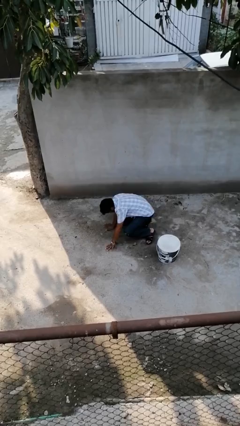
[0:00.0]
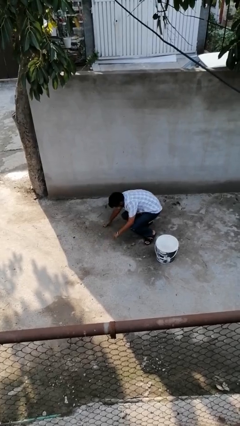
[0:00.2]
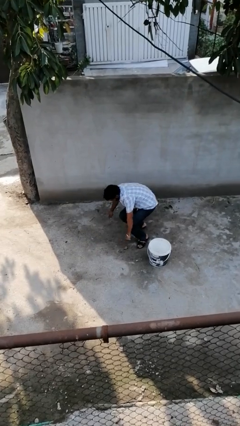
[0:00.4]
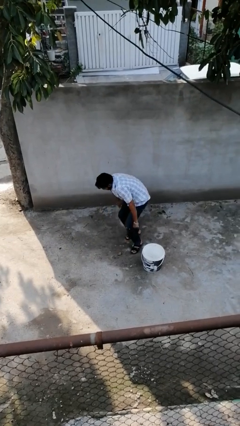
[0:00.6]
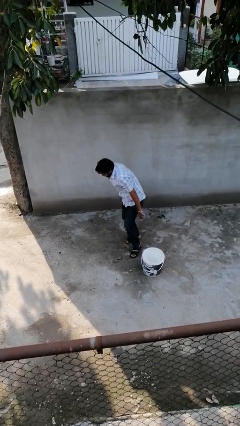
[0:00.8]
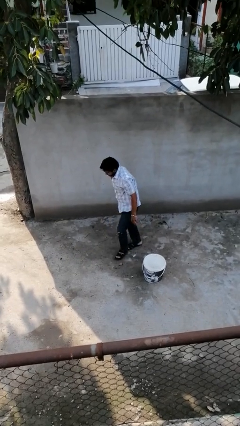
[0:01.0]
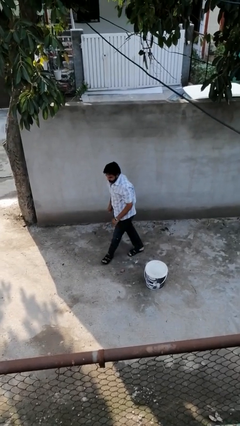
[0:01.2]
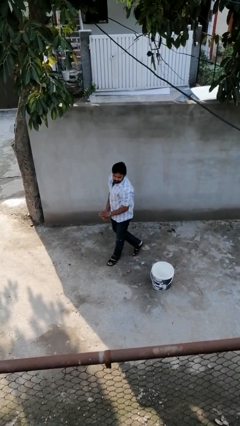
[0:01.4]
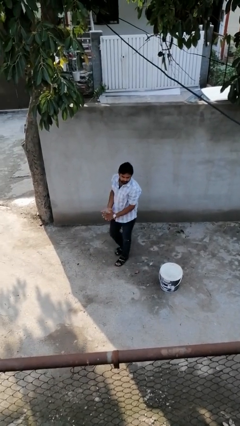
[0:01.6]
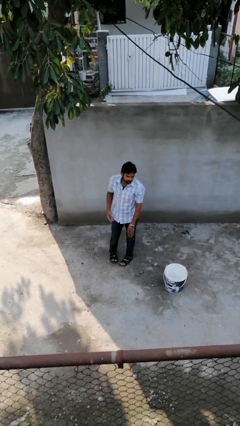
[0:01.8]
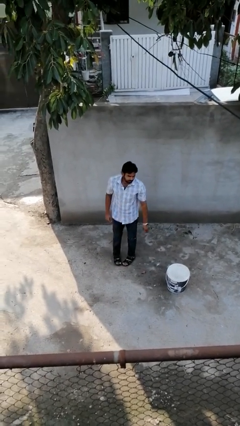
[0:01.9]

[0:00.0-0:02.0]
person stands up from floor

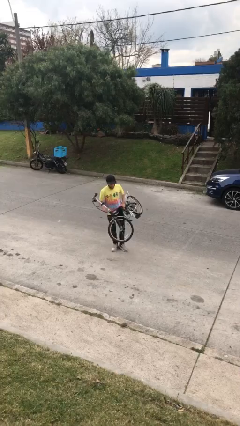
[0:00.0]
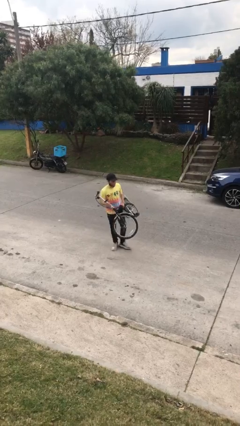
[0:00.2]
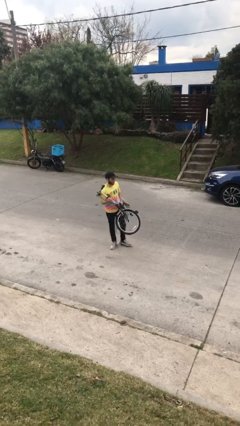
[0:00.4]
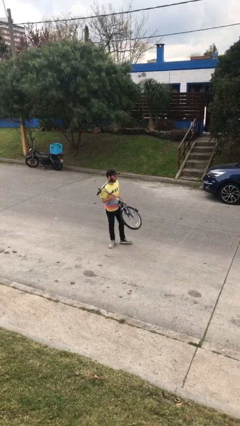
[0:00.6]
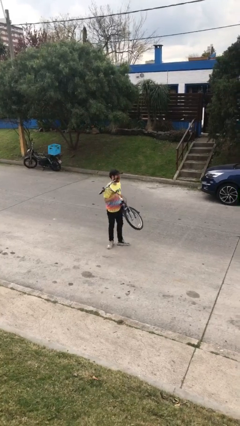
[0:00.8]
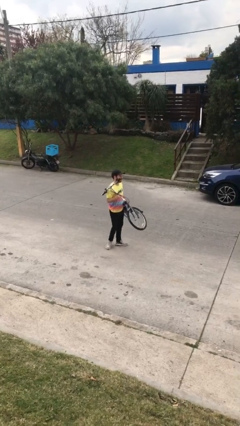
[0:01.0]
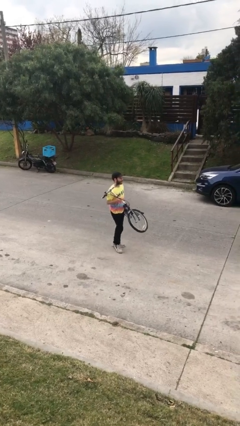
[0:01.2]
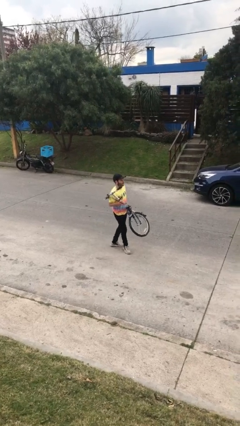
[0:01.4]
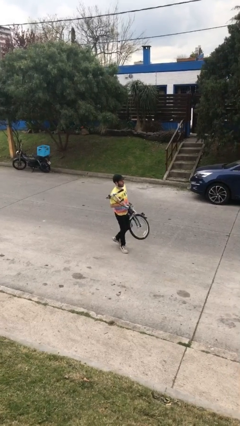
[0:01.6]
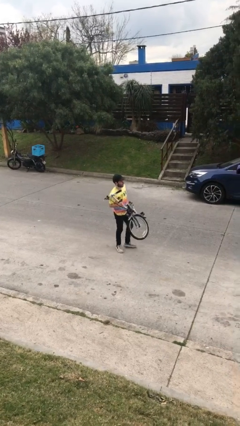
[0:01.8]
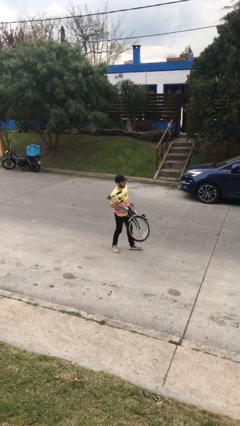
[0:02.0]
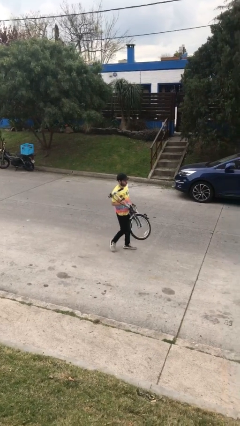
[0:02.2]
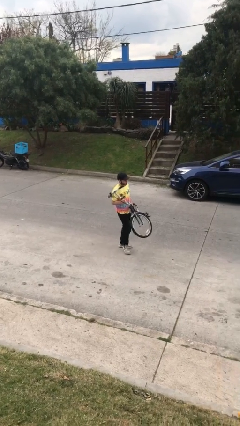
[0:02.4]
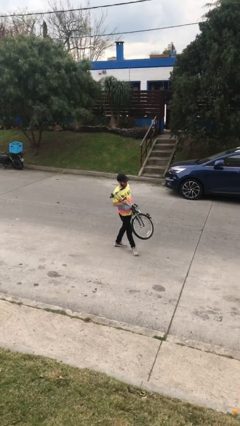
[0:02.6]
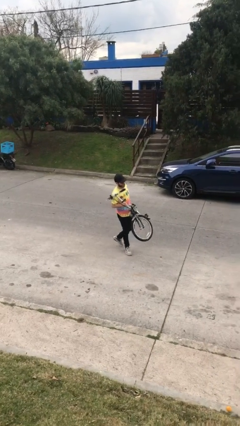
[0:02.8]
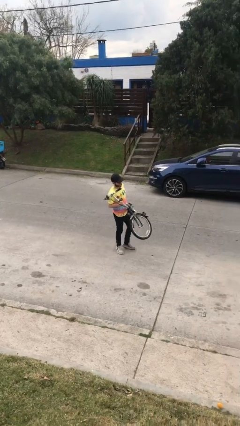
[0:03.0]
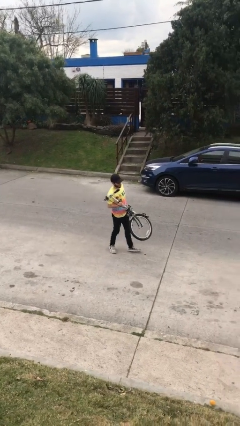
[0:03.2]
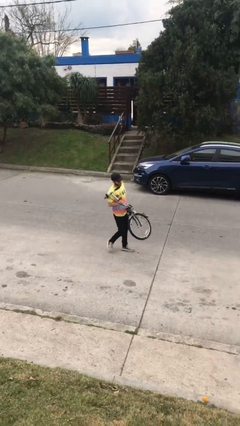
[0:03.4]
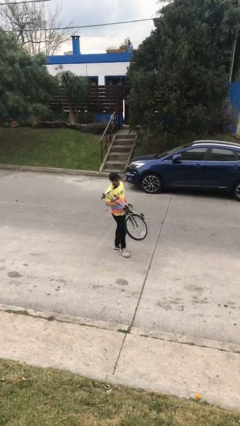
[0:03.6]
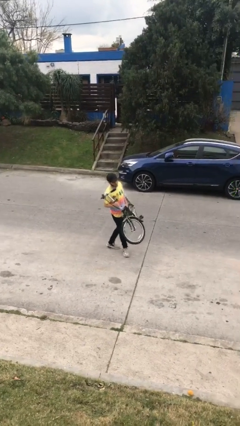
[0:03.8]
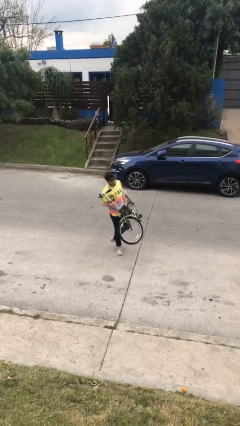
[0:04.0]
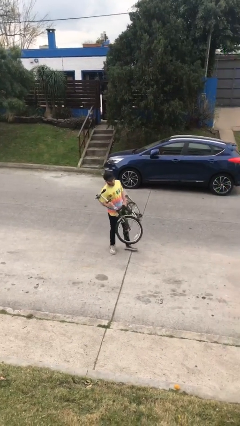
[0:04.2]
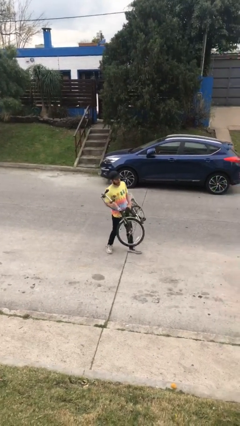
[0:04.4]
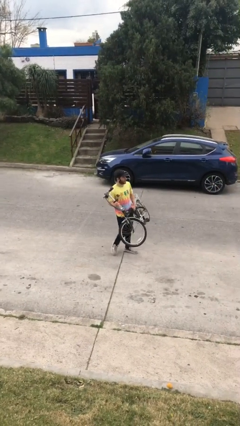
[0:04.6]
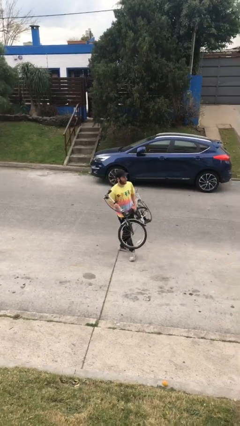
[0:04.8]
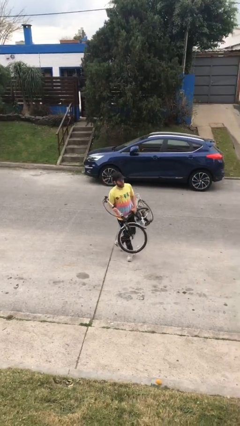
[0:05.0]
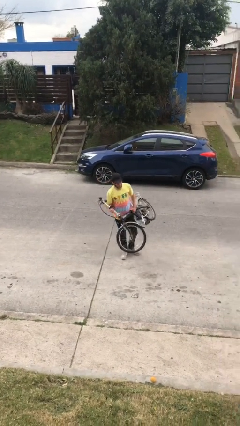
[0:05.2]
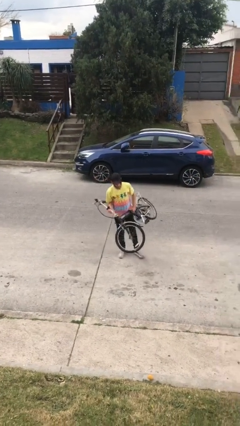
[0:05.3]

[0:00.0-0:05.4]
person carries heavy object

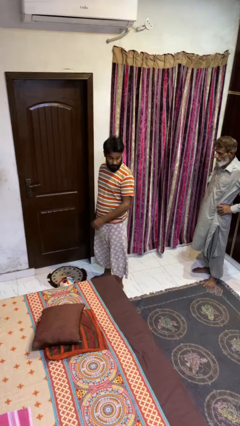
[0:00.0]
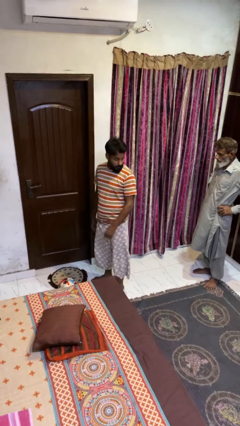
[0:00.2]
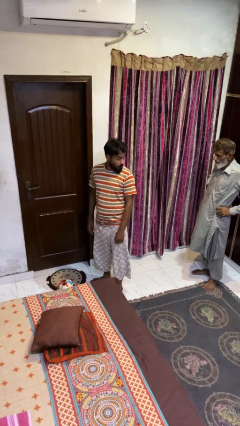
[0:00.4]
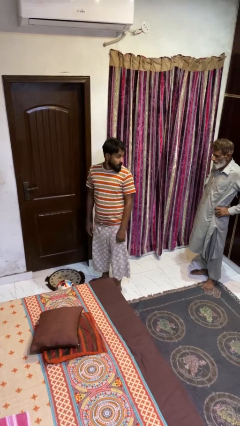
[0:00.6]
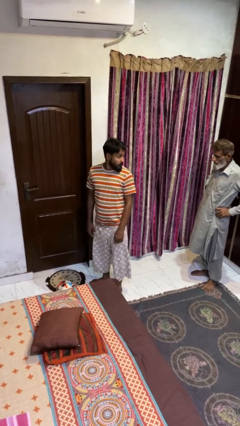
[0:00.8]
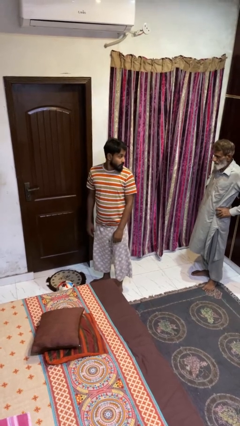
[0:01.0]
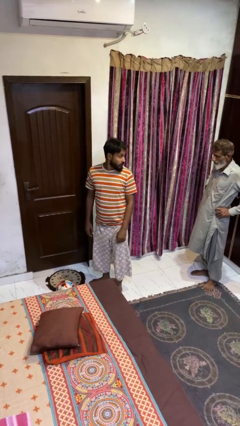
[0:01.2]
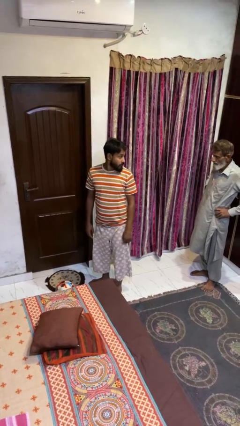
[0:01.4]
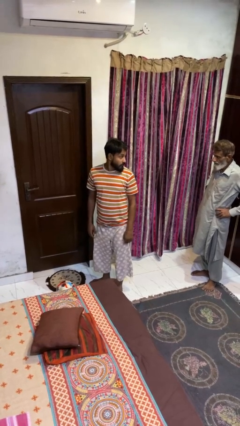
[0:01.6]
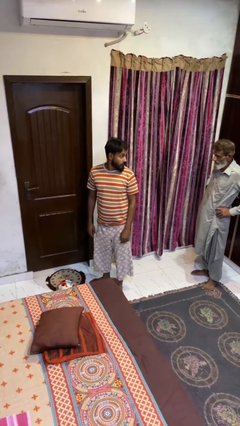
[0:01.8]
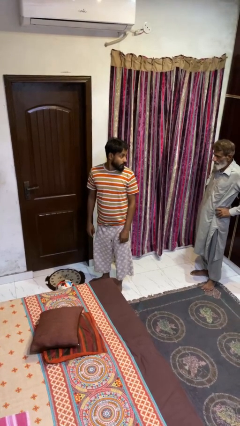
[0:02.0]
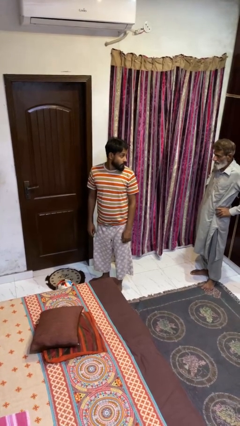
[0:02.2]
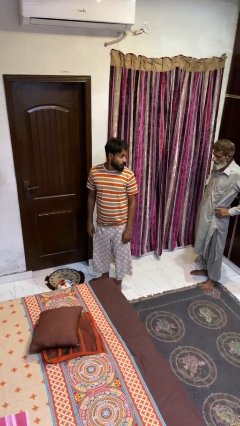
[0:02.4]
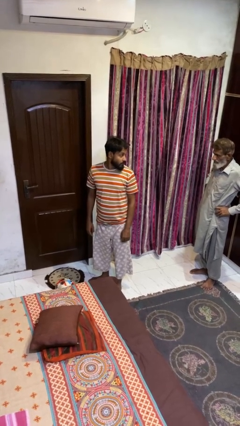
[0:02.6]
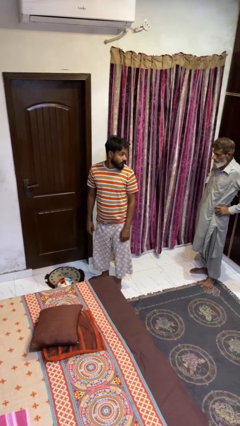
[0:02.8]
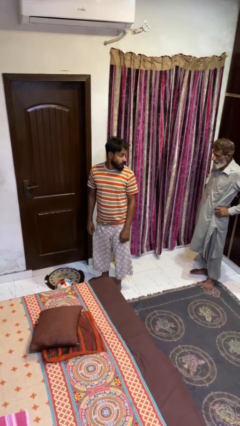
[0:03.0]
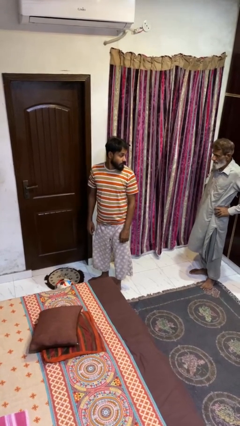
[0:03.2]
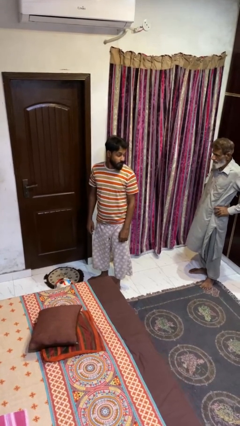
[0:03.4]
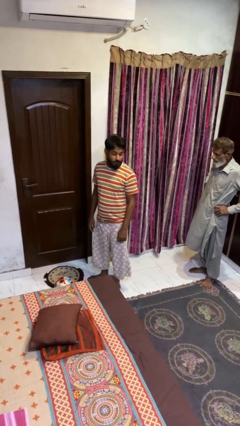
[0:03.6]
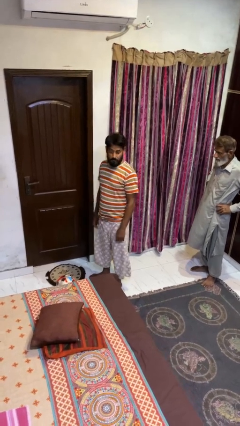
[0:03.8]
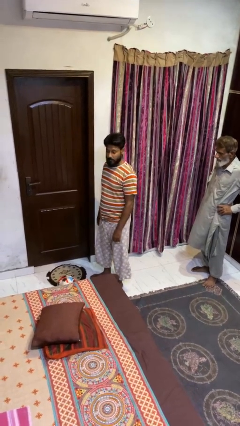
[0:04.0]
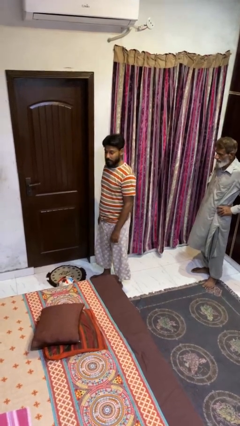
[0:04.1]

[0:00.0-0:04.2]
person looks over shoulder

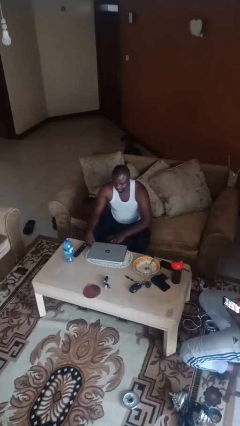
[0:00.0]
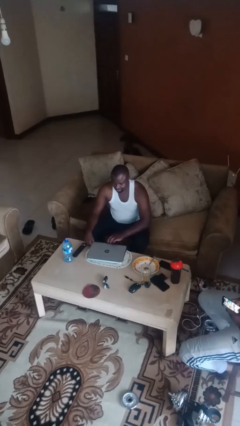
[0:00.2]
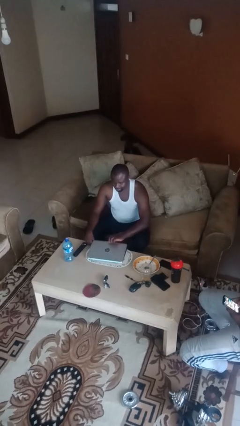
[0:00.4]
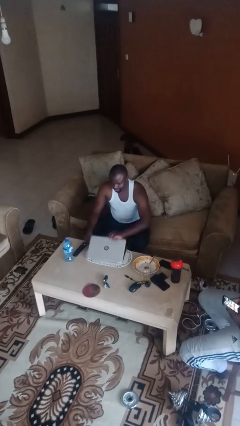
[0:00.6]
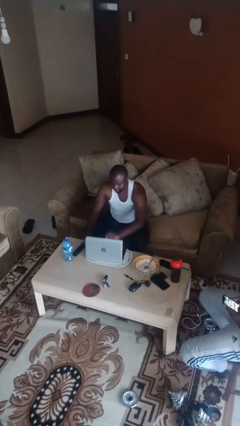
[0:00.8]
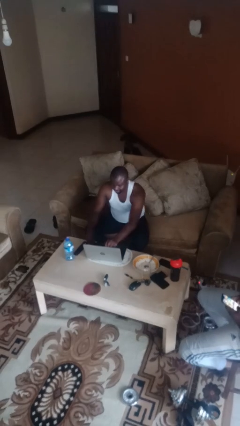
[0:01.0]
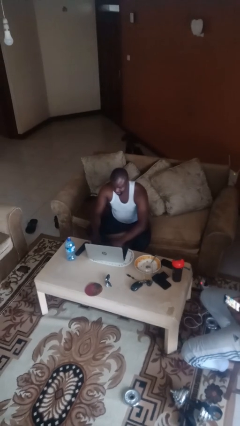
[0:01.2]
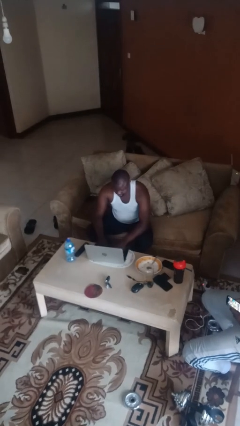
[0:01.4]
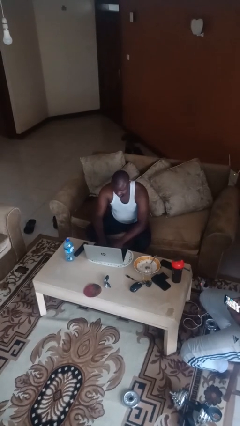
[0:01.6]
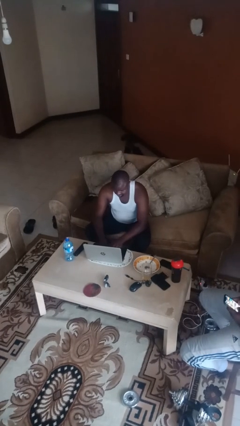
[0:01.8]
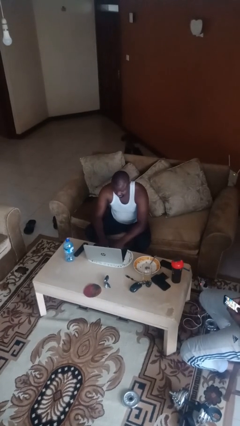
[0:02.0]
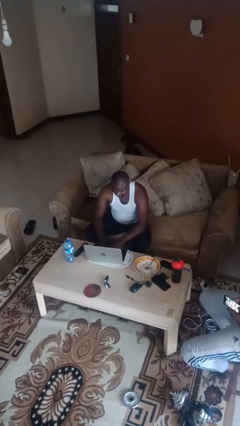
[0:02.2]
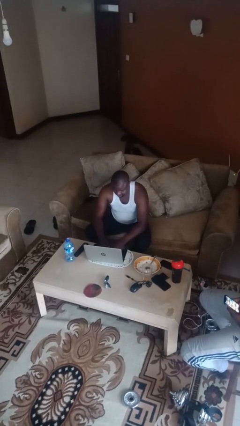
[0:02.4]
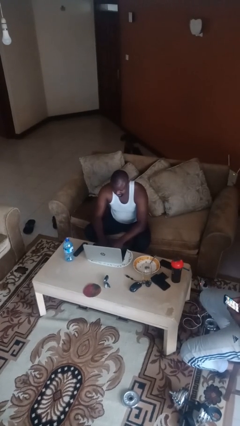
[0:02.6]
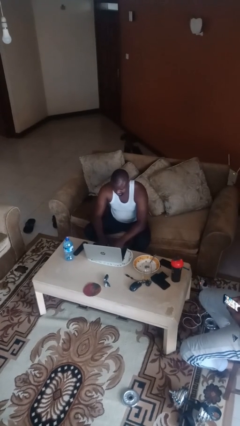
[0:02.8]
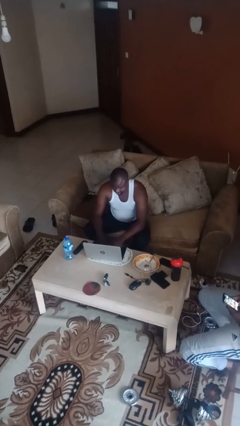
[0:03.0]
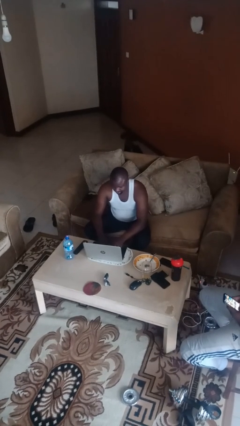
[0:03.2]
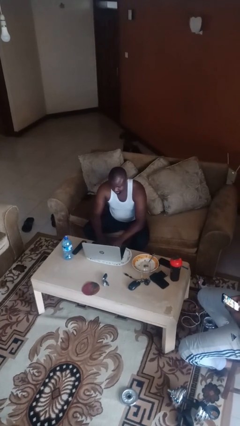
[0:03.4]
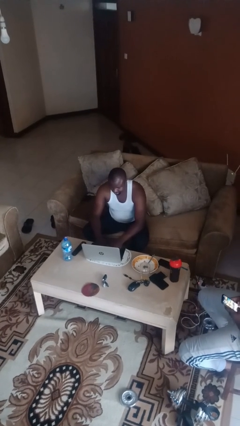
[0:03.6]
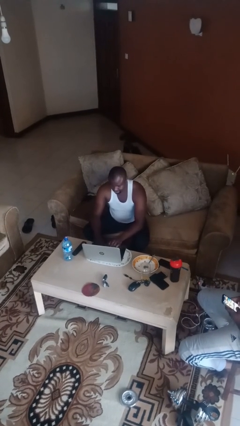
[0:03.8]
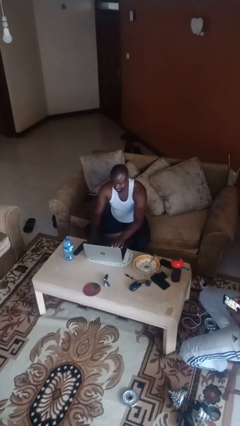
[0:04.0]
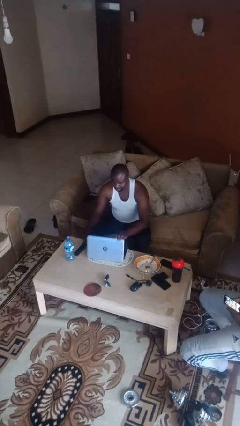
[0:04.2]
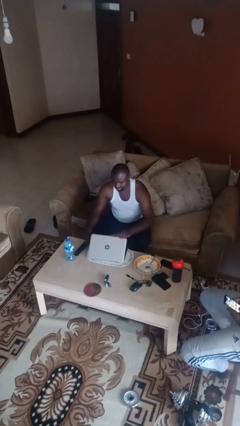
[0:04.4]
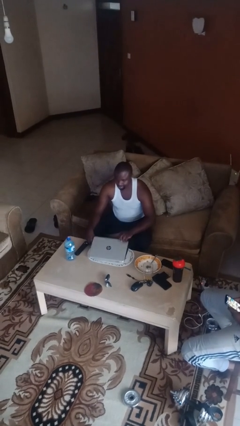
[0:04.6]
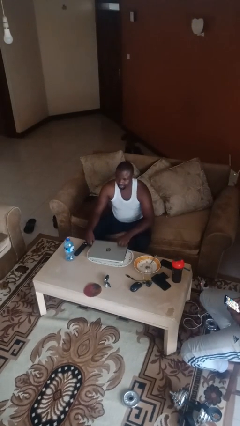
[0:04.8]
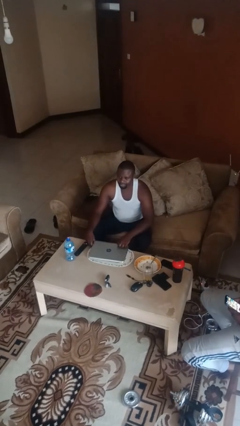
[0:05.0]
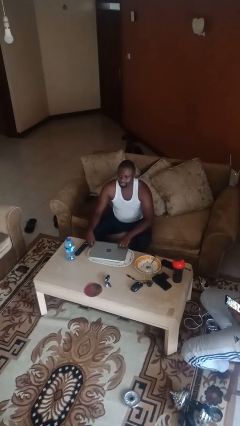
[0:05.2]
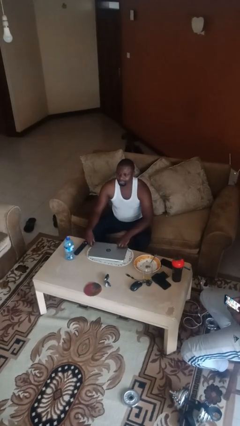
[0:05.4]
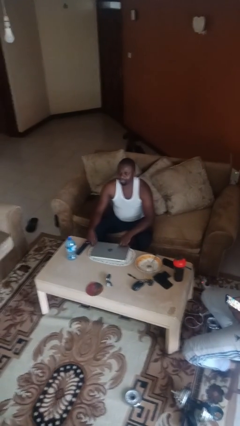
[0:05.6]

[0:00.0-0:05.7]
person interacts with laptop

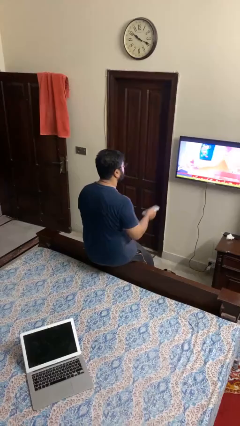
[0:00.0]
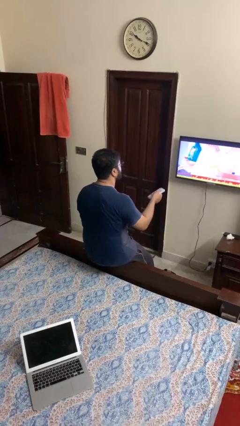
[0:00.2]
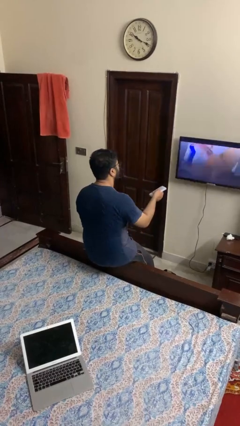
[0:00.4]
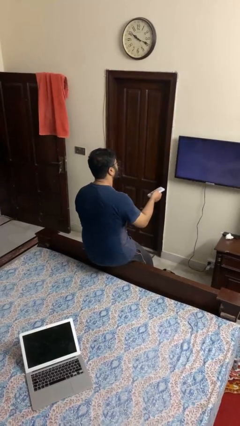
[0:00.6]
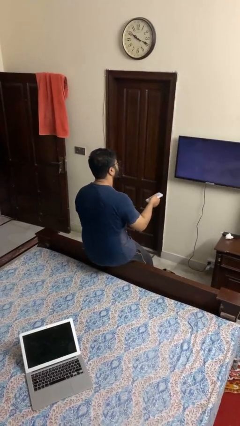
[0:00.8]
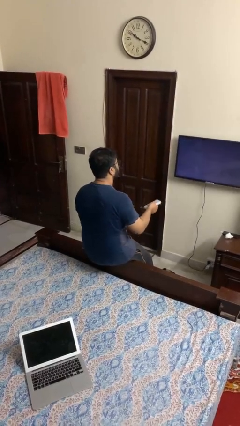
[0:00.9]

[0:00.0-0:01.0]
person uses television remote
